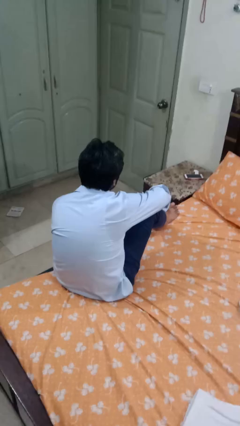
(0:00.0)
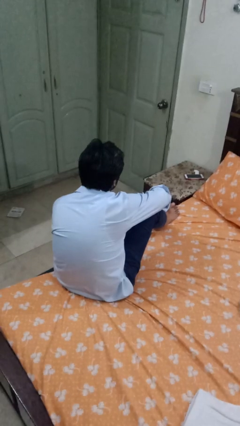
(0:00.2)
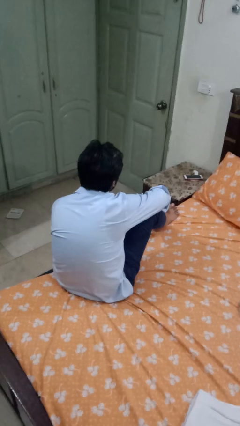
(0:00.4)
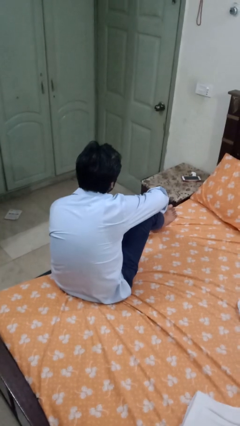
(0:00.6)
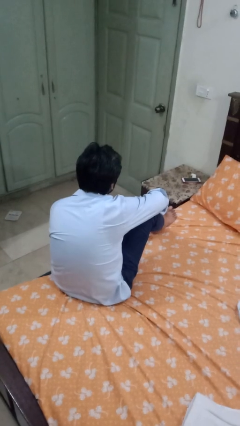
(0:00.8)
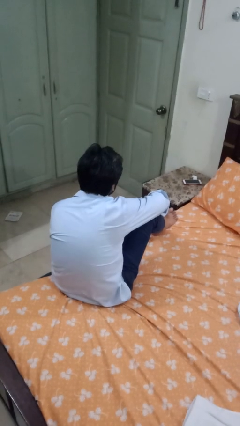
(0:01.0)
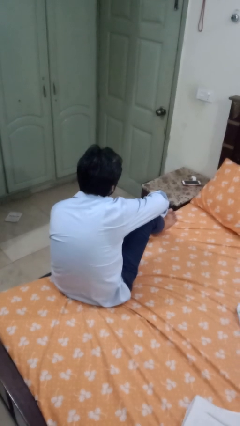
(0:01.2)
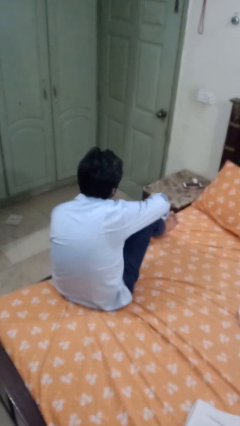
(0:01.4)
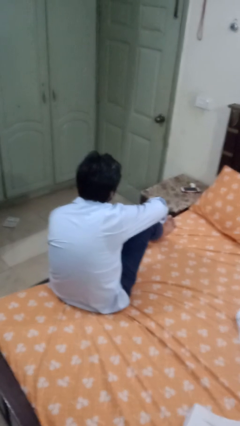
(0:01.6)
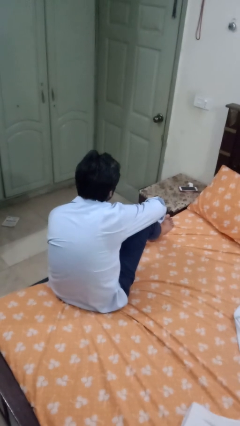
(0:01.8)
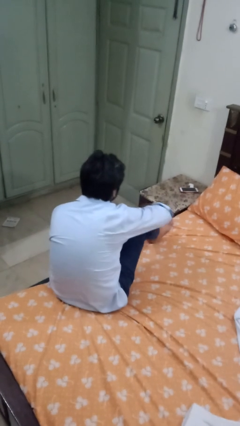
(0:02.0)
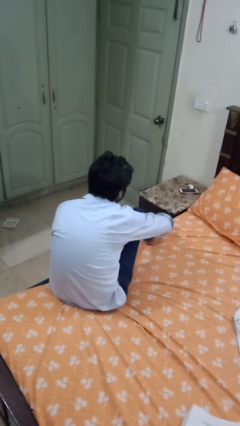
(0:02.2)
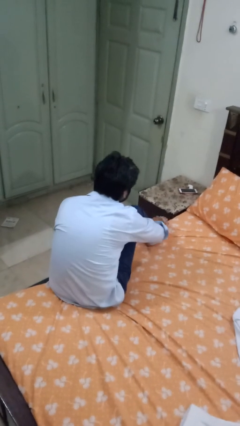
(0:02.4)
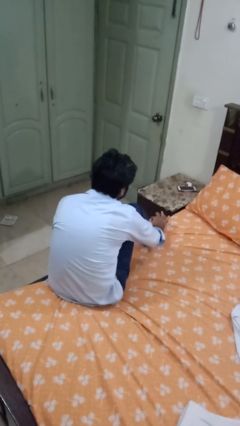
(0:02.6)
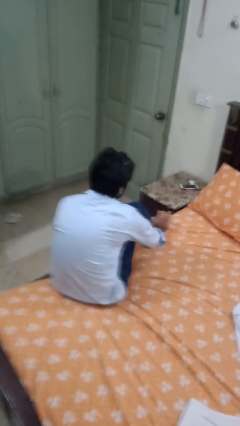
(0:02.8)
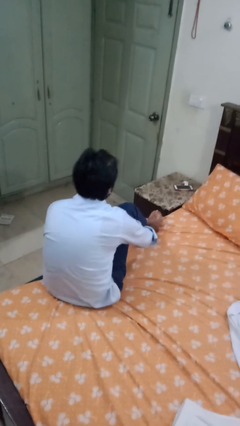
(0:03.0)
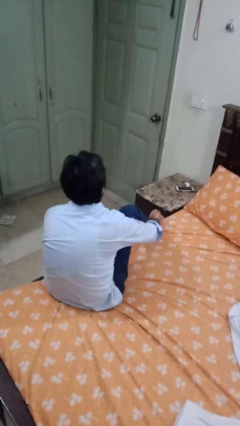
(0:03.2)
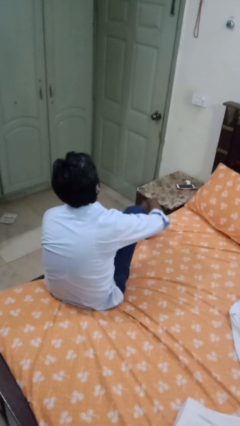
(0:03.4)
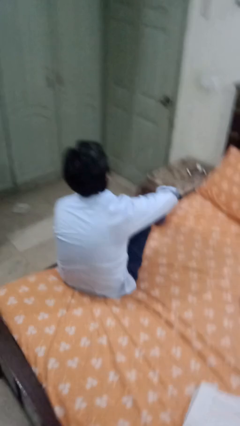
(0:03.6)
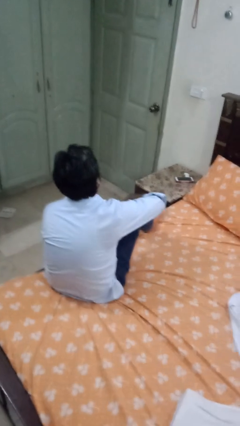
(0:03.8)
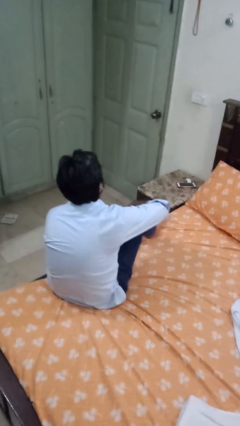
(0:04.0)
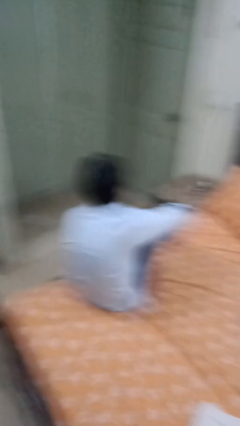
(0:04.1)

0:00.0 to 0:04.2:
person rubs foot

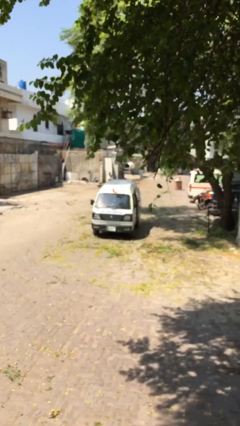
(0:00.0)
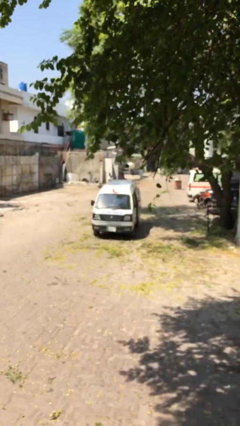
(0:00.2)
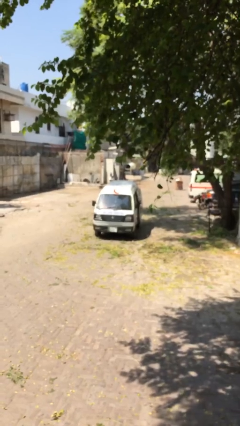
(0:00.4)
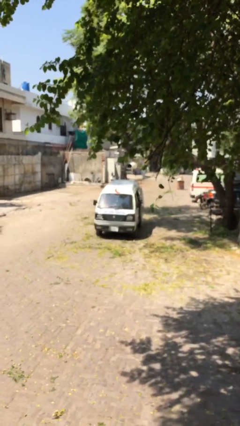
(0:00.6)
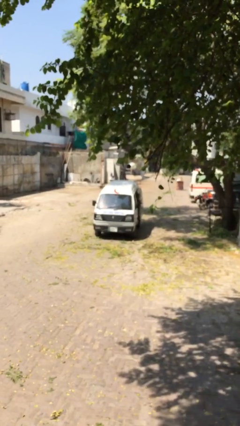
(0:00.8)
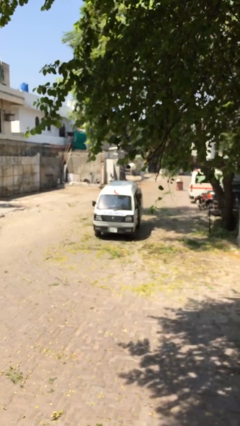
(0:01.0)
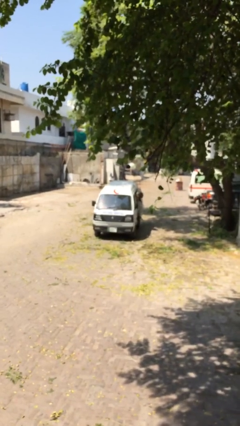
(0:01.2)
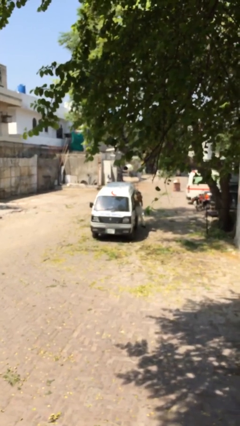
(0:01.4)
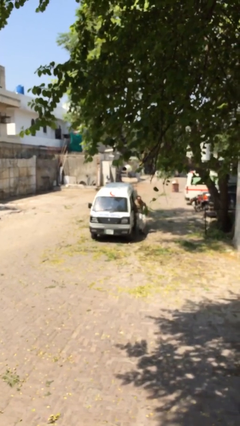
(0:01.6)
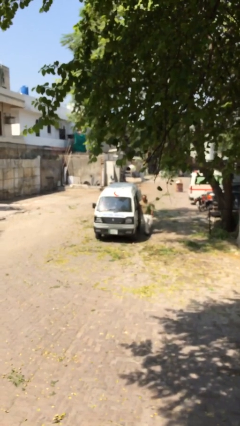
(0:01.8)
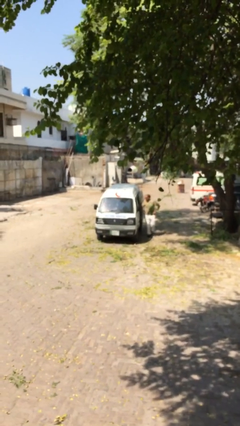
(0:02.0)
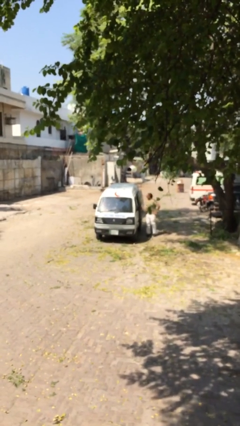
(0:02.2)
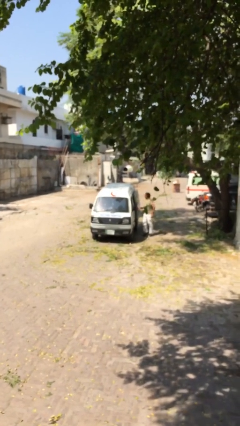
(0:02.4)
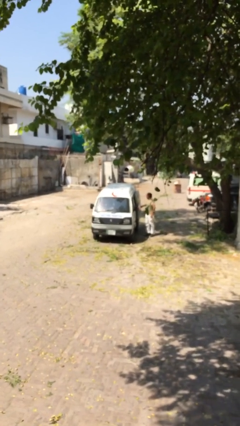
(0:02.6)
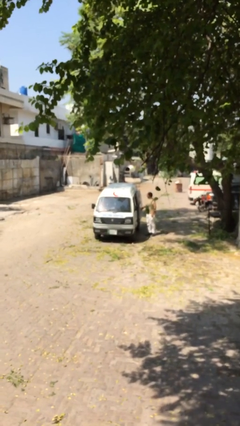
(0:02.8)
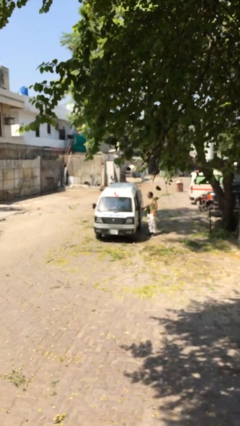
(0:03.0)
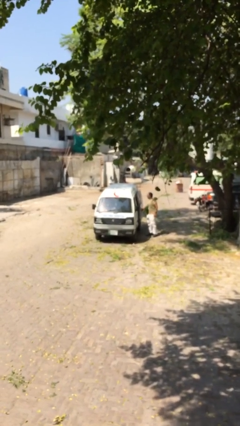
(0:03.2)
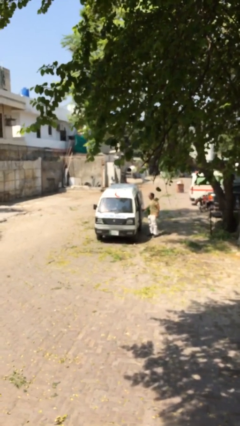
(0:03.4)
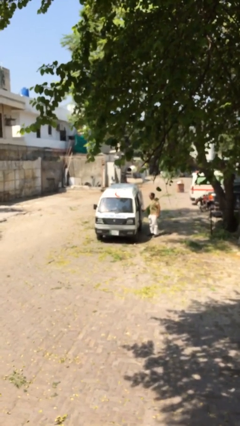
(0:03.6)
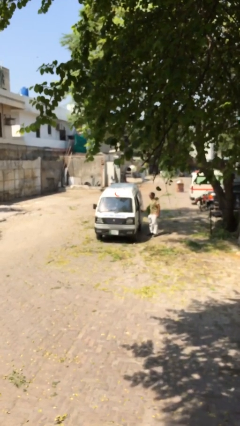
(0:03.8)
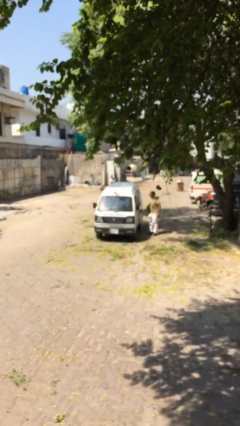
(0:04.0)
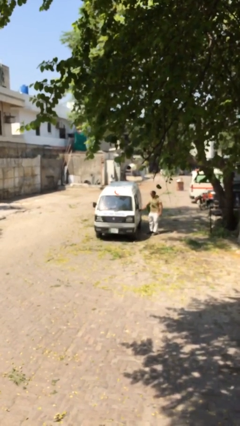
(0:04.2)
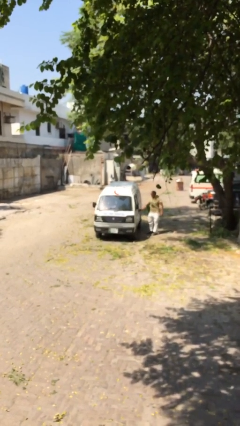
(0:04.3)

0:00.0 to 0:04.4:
car drops off person

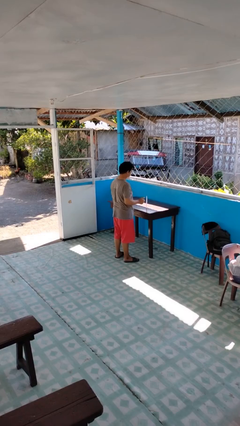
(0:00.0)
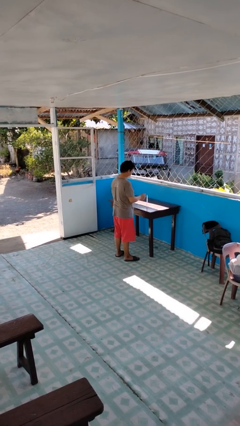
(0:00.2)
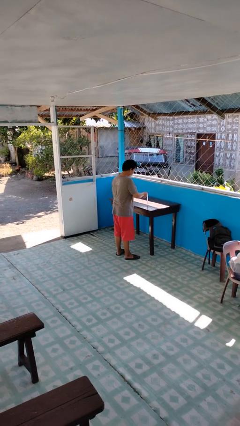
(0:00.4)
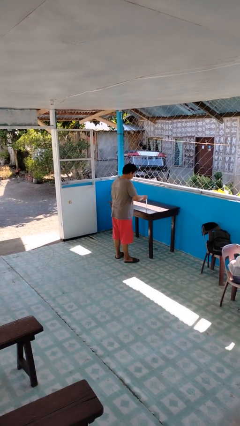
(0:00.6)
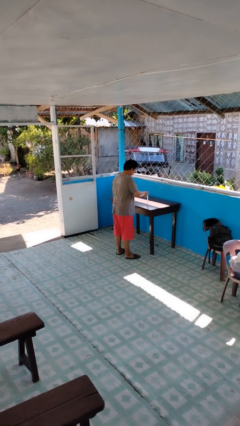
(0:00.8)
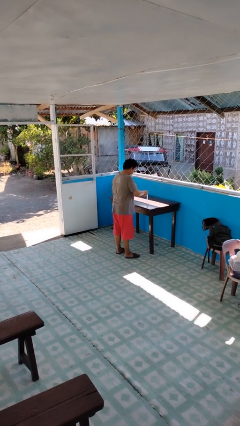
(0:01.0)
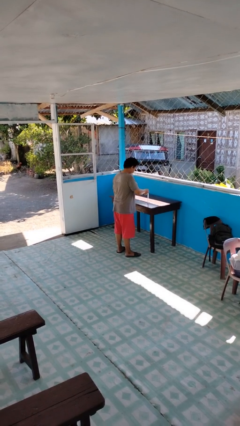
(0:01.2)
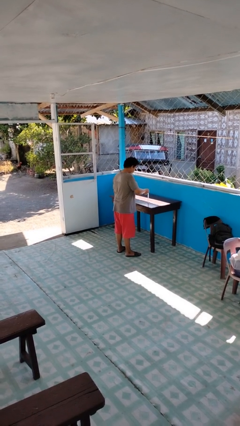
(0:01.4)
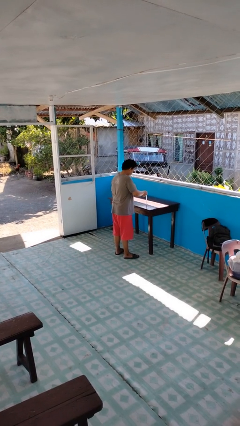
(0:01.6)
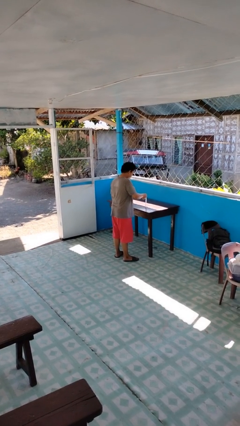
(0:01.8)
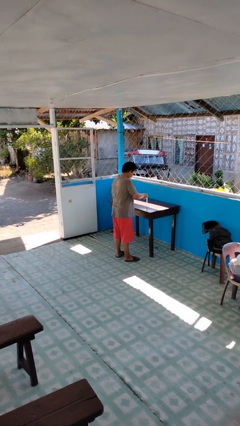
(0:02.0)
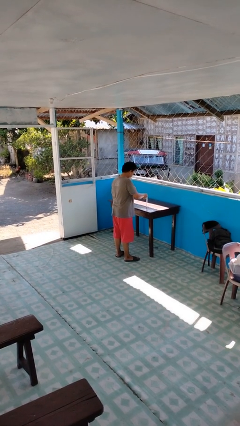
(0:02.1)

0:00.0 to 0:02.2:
person lights candle

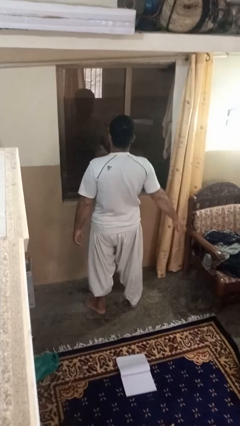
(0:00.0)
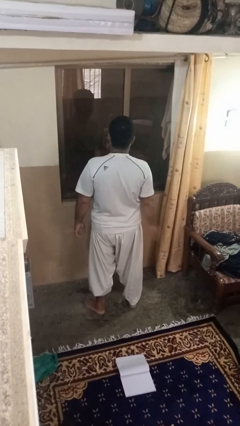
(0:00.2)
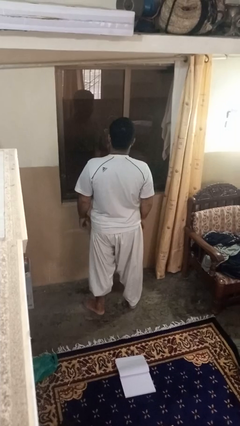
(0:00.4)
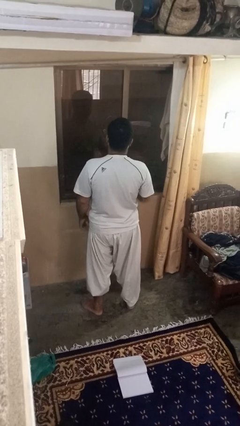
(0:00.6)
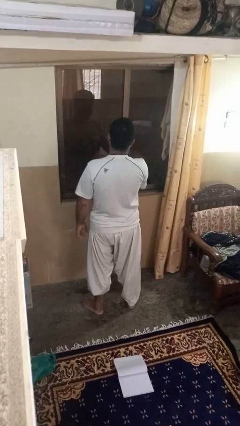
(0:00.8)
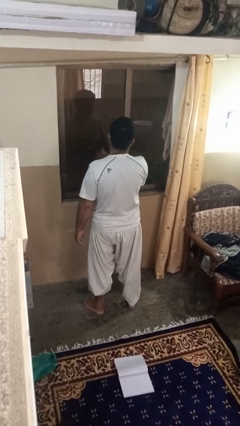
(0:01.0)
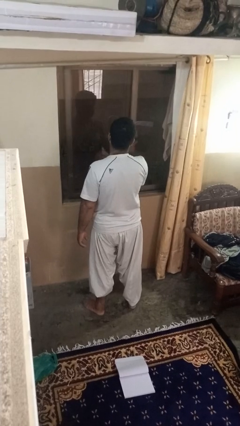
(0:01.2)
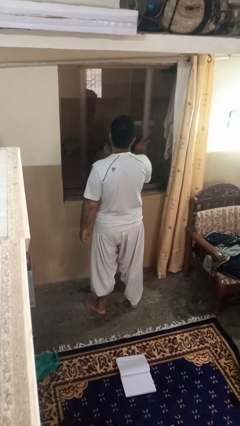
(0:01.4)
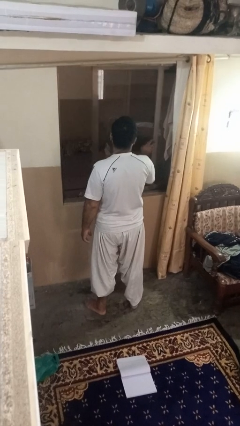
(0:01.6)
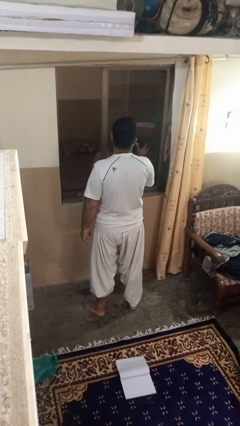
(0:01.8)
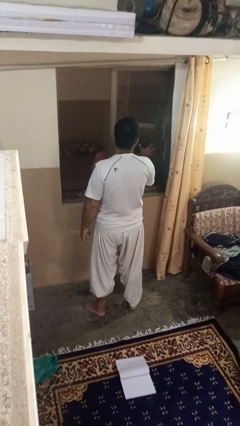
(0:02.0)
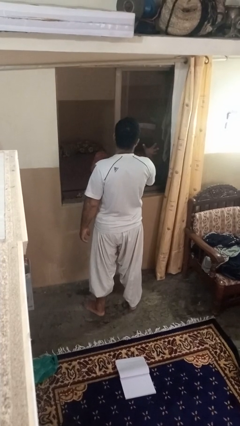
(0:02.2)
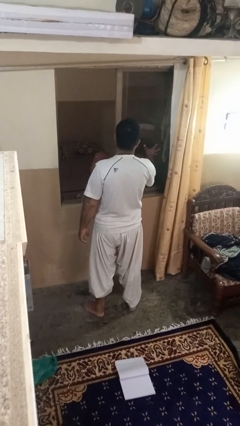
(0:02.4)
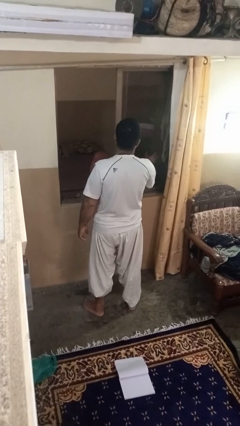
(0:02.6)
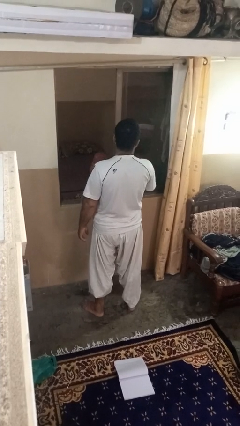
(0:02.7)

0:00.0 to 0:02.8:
person opens home window

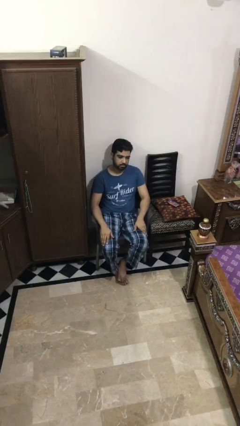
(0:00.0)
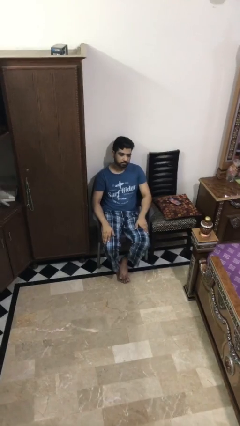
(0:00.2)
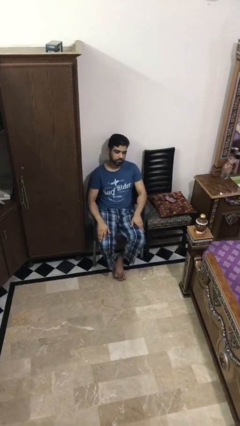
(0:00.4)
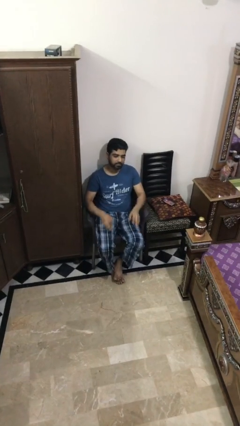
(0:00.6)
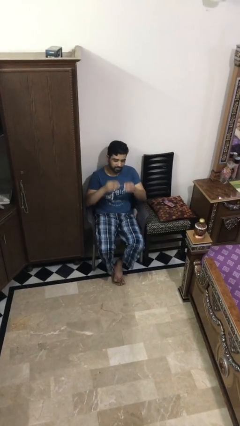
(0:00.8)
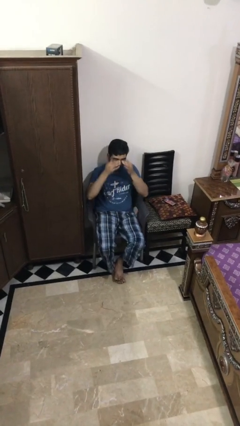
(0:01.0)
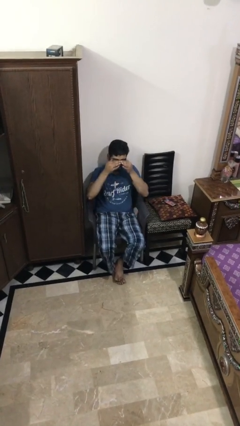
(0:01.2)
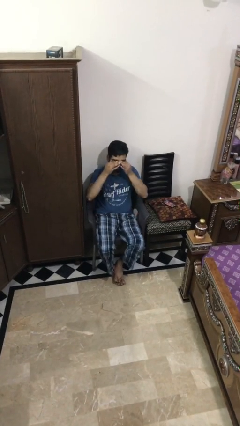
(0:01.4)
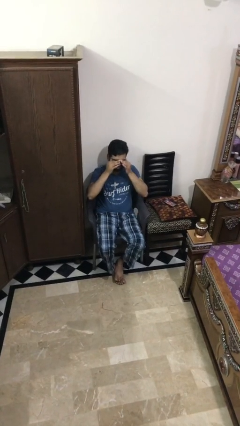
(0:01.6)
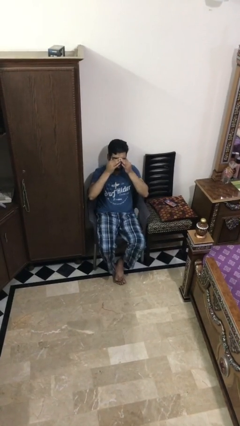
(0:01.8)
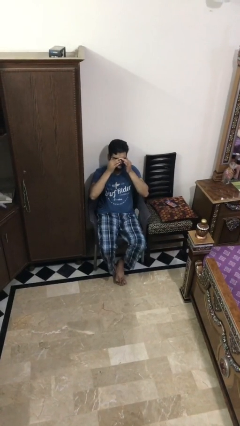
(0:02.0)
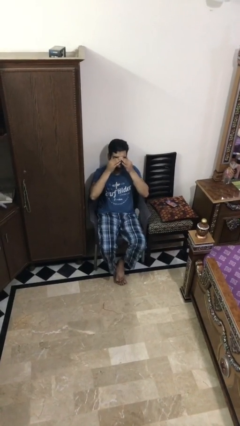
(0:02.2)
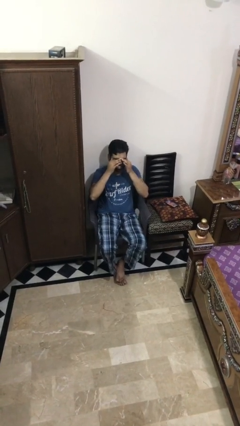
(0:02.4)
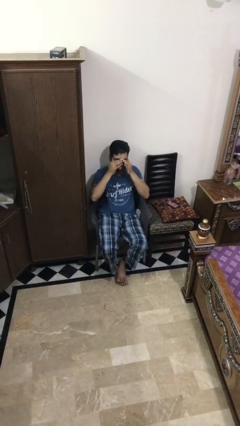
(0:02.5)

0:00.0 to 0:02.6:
person rubs eyes

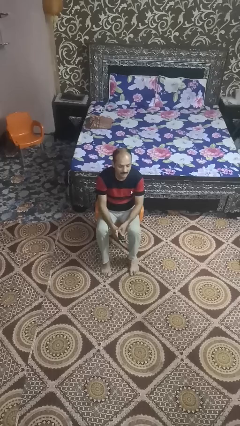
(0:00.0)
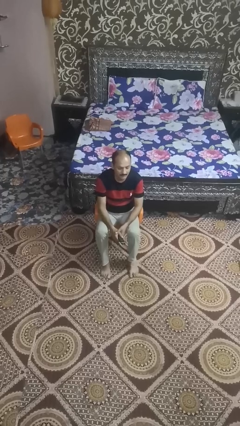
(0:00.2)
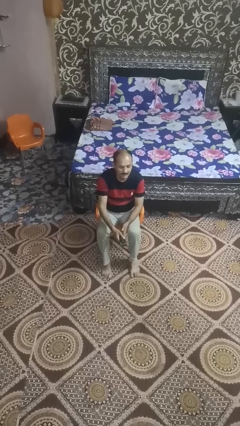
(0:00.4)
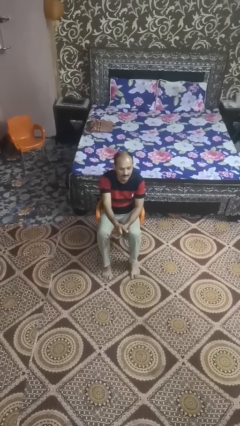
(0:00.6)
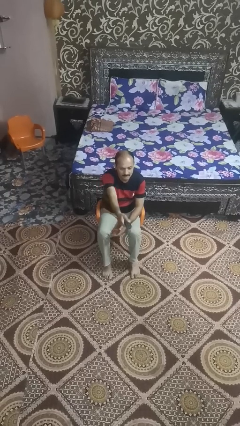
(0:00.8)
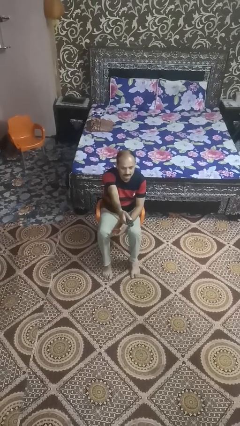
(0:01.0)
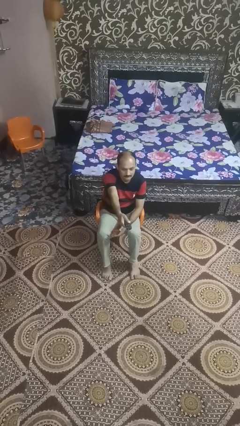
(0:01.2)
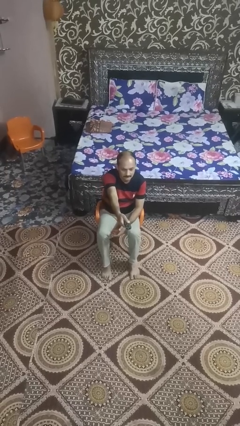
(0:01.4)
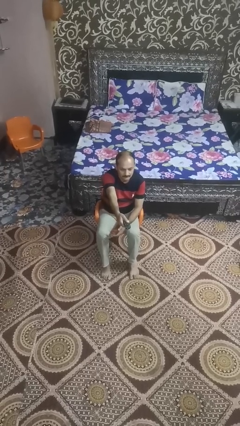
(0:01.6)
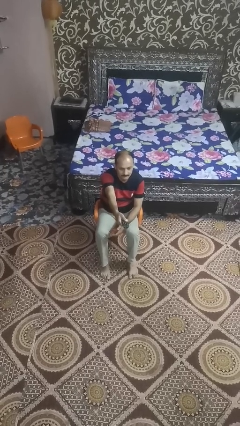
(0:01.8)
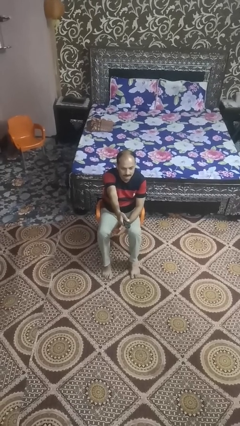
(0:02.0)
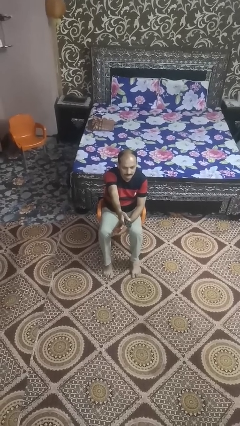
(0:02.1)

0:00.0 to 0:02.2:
person uses television remote
